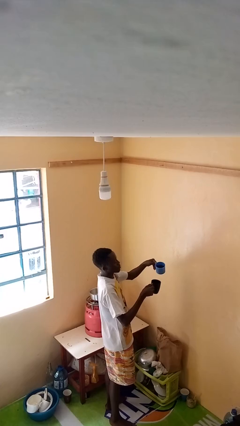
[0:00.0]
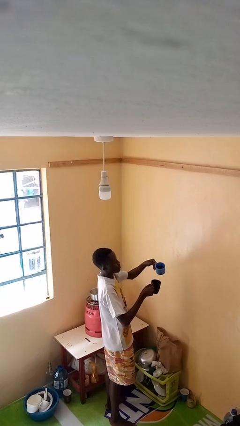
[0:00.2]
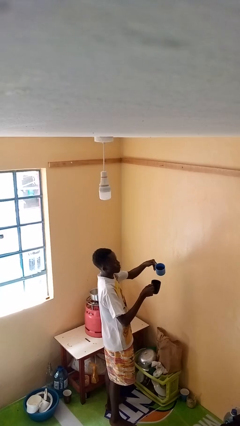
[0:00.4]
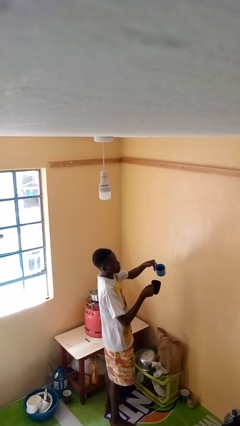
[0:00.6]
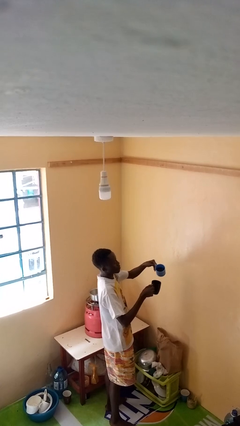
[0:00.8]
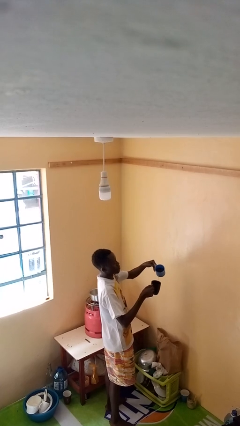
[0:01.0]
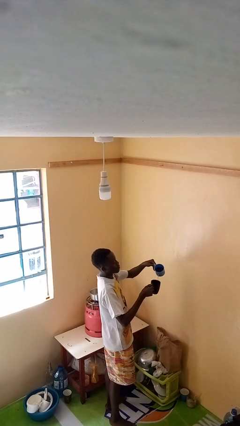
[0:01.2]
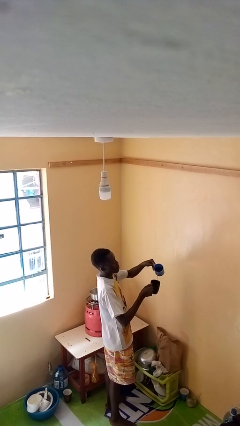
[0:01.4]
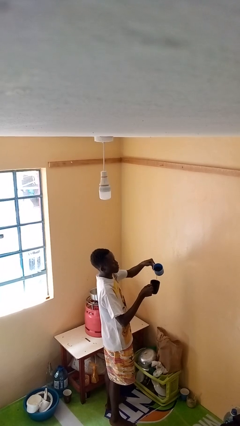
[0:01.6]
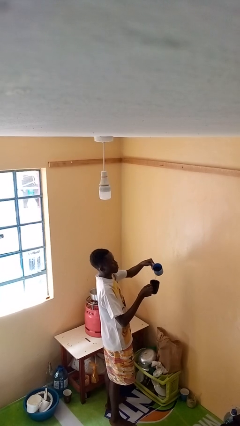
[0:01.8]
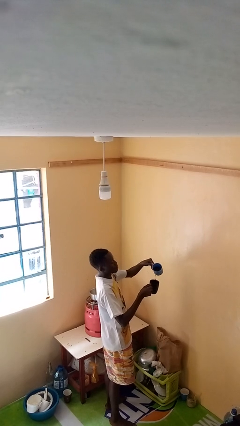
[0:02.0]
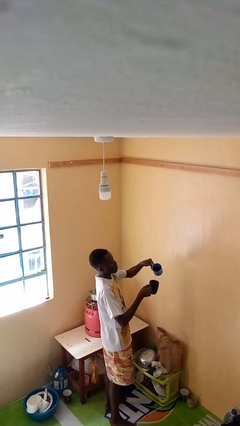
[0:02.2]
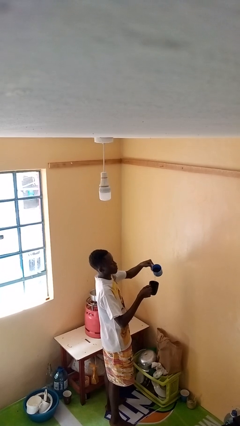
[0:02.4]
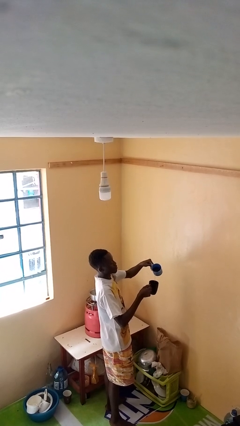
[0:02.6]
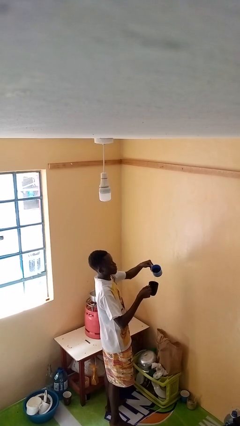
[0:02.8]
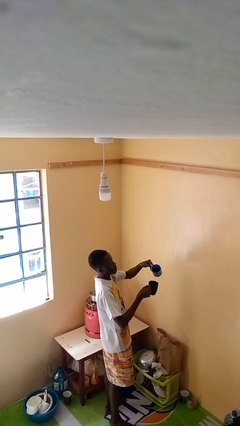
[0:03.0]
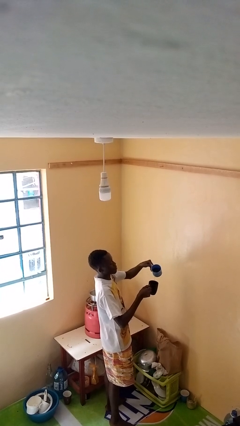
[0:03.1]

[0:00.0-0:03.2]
person pours coffee into mug

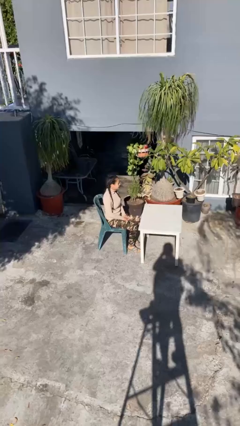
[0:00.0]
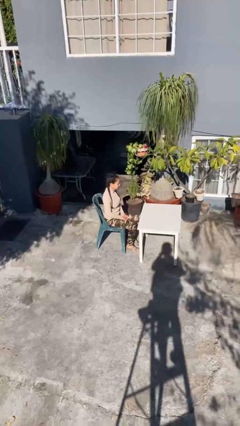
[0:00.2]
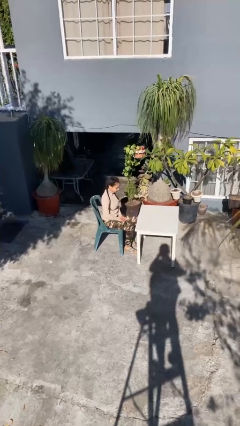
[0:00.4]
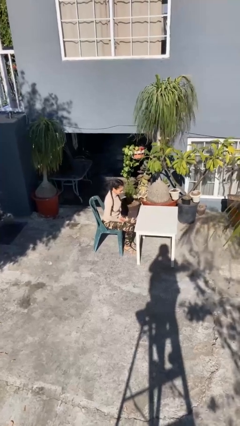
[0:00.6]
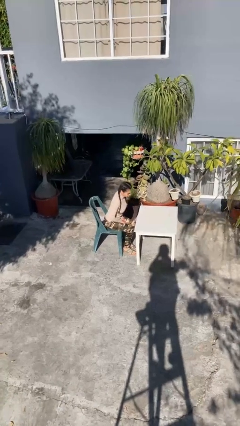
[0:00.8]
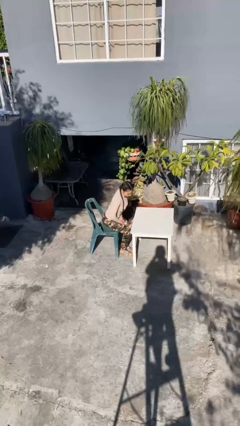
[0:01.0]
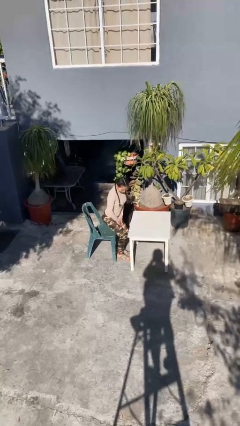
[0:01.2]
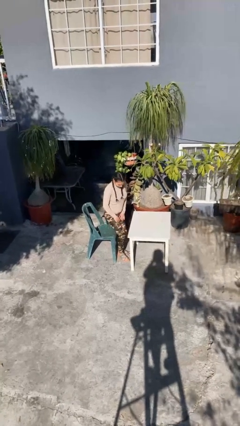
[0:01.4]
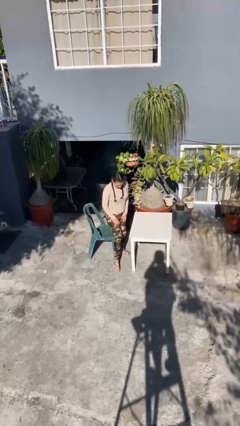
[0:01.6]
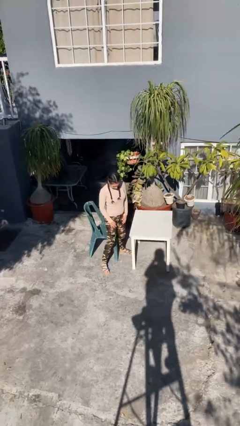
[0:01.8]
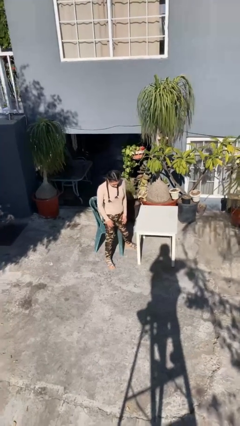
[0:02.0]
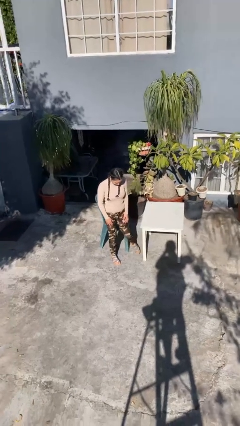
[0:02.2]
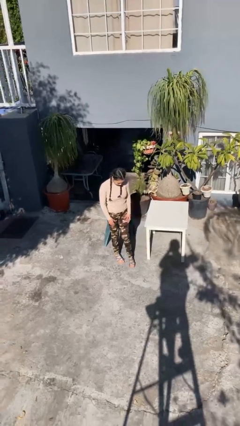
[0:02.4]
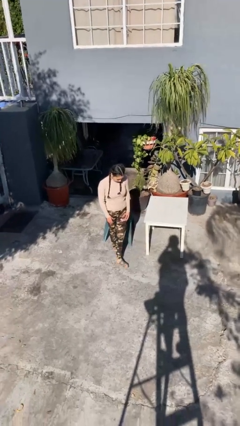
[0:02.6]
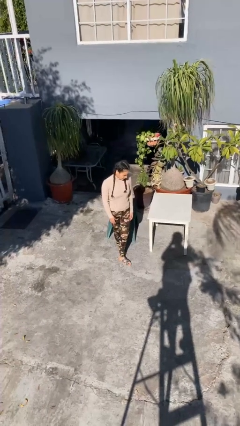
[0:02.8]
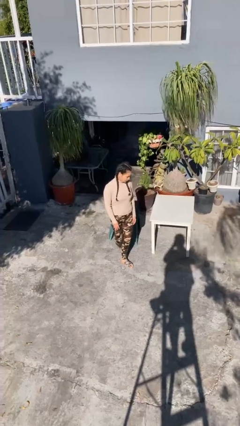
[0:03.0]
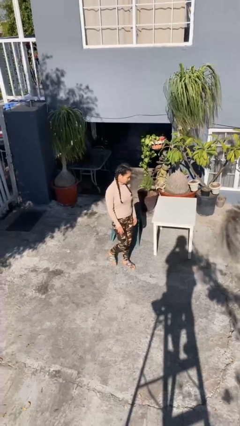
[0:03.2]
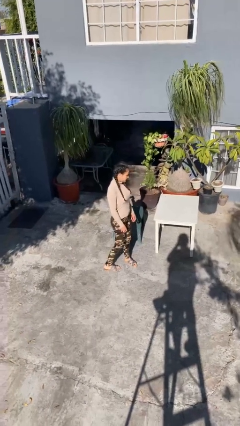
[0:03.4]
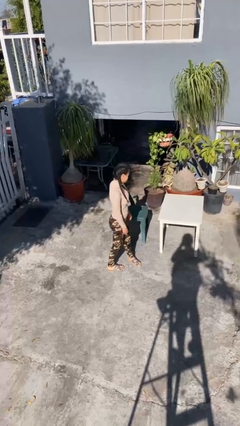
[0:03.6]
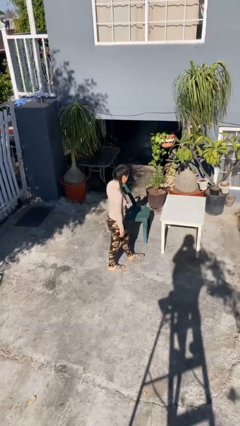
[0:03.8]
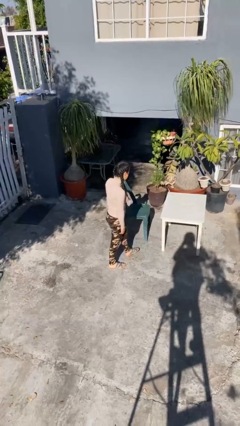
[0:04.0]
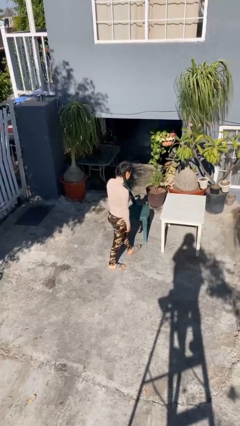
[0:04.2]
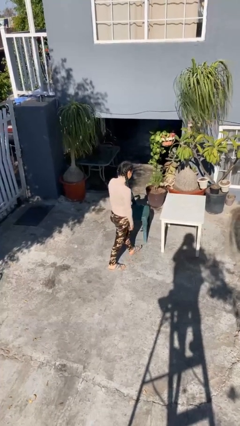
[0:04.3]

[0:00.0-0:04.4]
person stands up

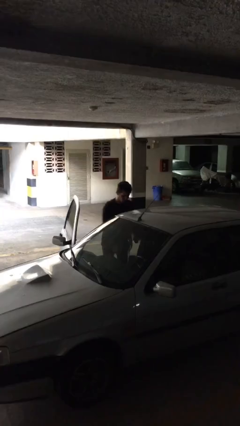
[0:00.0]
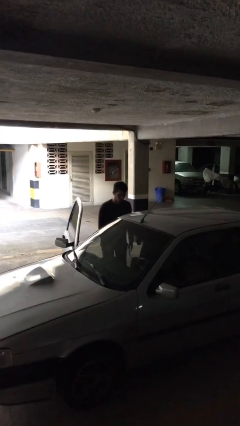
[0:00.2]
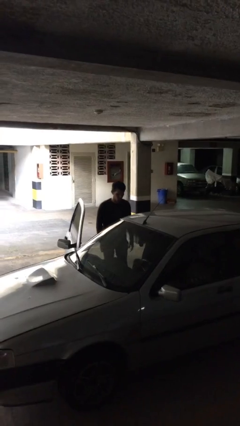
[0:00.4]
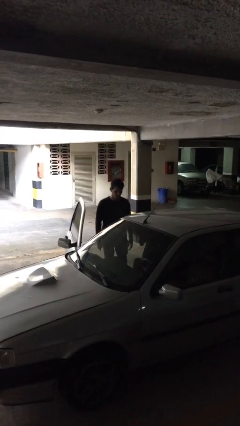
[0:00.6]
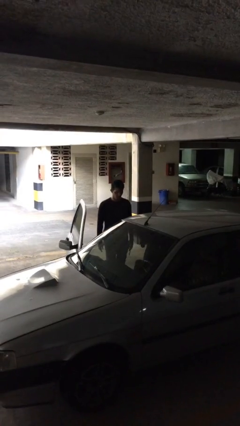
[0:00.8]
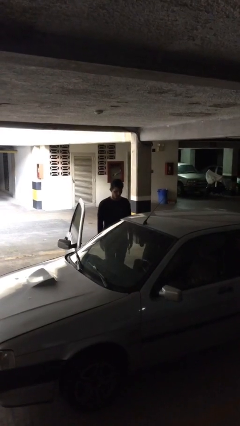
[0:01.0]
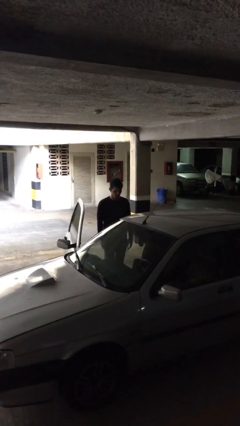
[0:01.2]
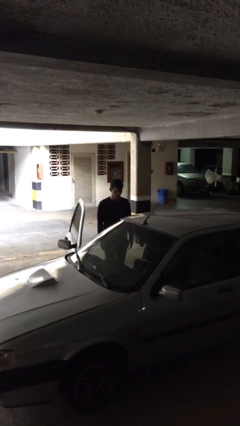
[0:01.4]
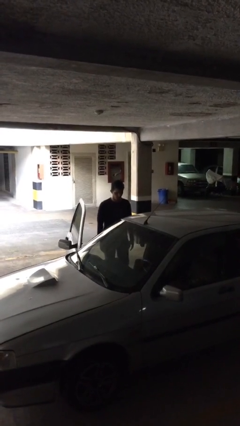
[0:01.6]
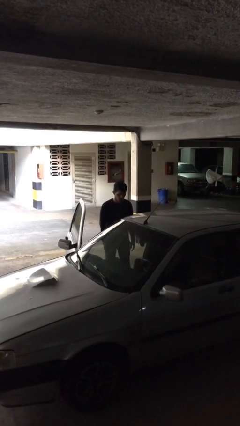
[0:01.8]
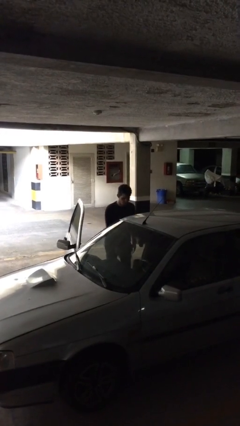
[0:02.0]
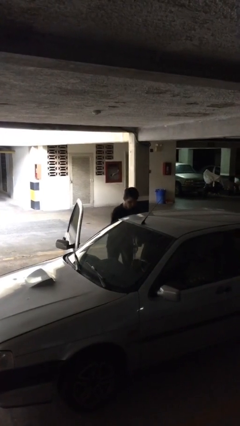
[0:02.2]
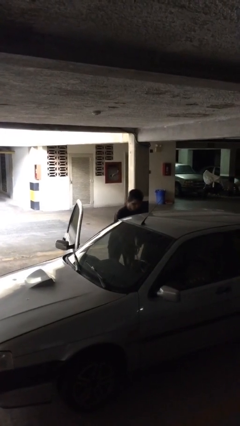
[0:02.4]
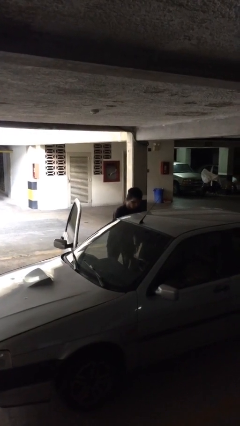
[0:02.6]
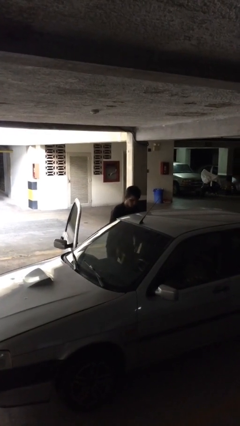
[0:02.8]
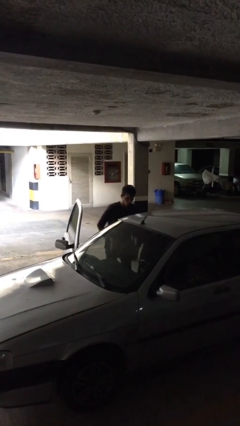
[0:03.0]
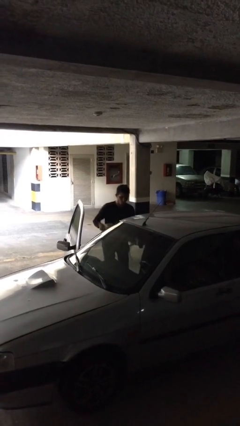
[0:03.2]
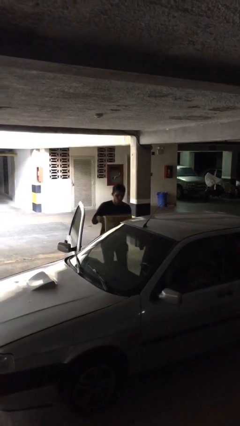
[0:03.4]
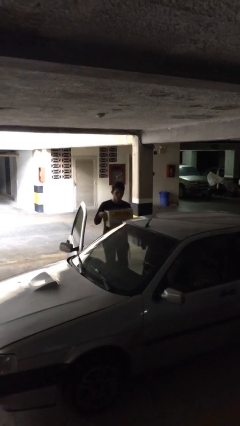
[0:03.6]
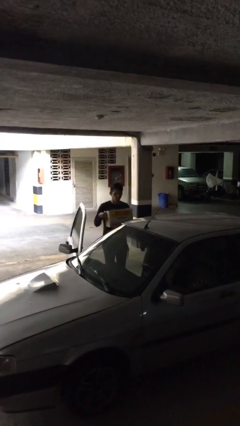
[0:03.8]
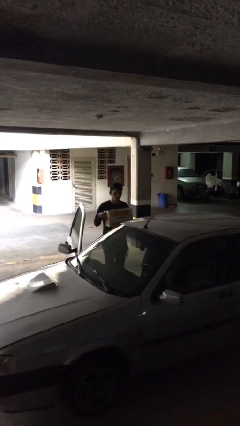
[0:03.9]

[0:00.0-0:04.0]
person unloads car

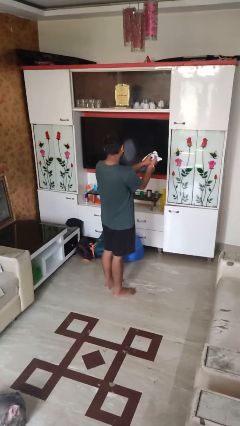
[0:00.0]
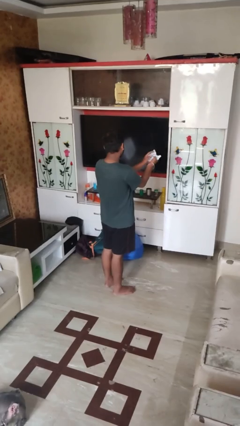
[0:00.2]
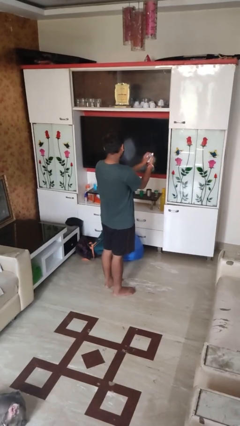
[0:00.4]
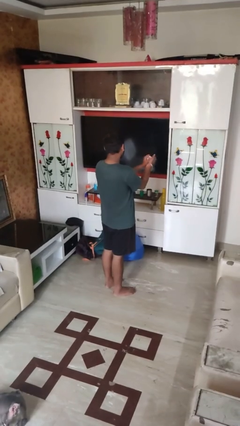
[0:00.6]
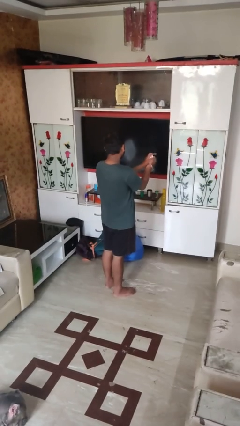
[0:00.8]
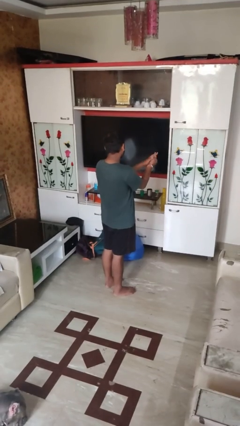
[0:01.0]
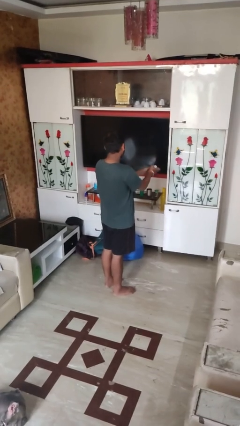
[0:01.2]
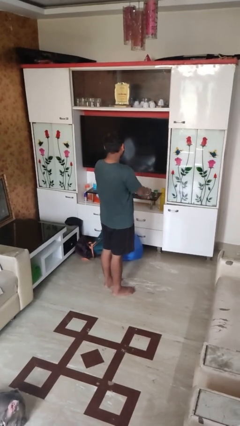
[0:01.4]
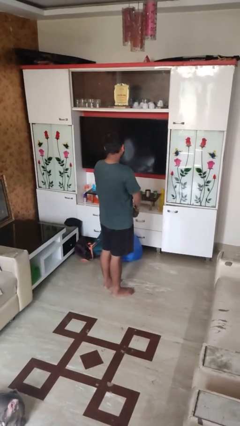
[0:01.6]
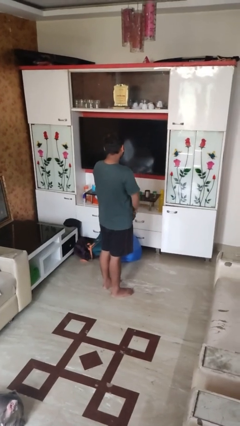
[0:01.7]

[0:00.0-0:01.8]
person crumples paper

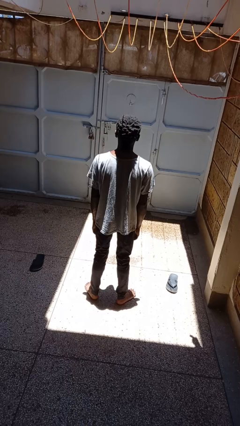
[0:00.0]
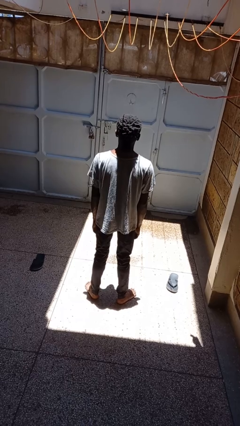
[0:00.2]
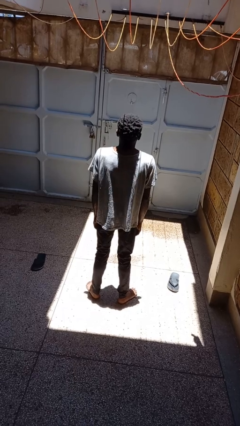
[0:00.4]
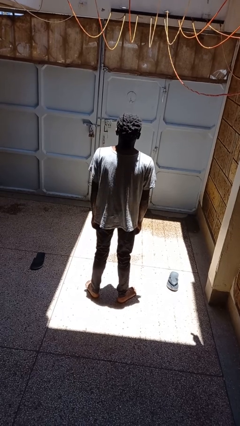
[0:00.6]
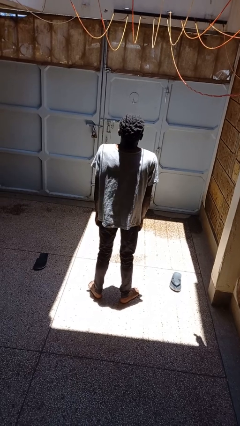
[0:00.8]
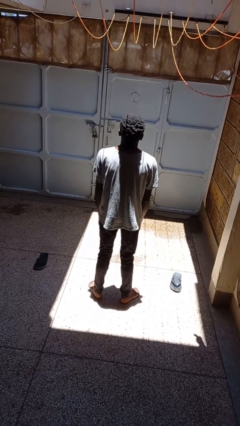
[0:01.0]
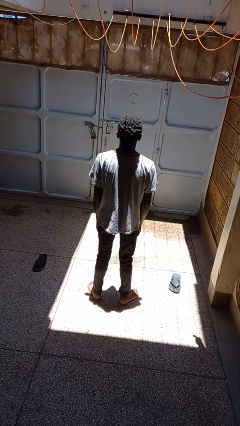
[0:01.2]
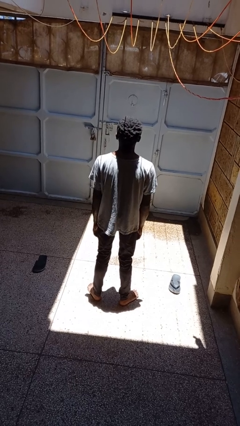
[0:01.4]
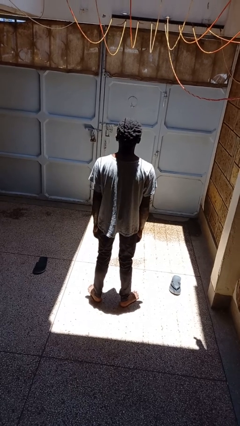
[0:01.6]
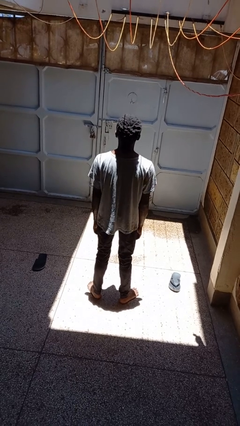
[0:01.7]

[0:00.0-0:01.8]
person shrugs

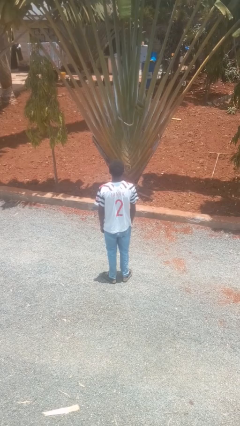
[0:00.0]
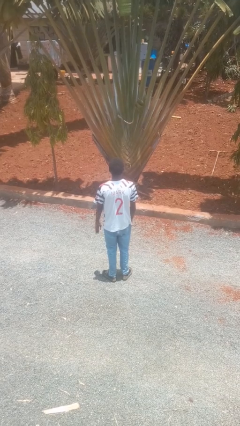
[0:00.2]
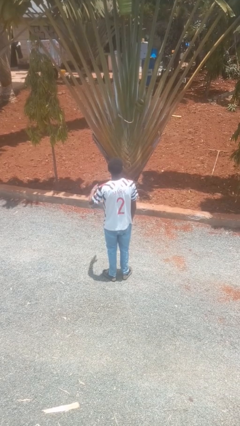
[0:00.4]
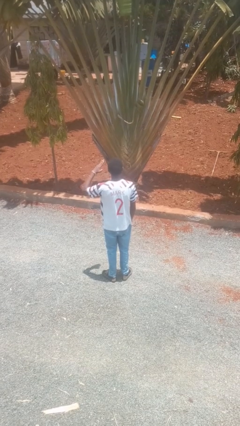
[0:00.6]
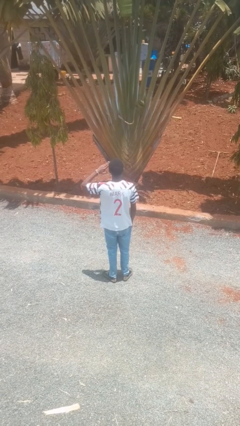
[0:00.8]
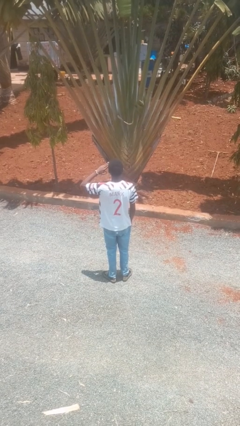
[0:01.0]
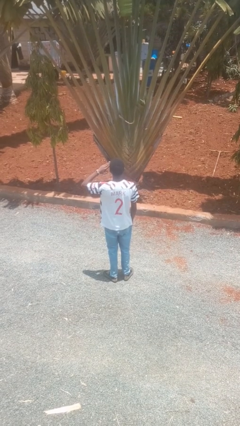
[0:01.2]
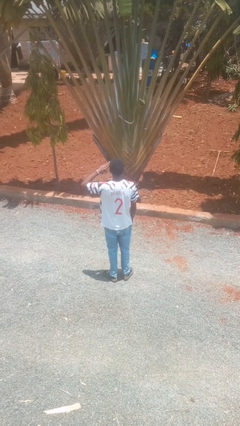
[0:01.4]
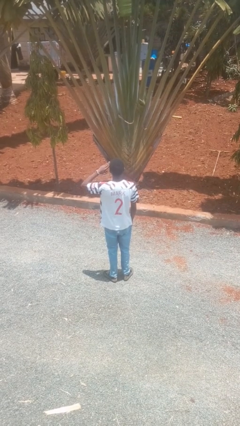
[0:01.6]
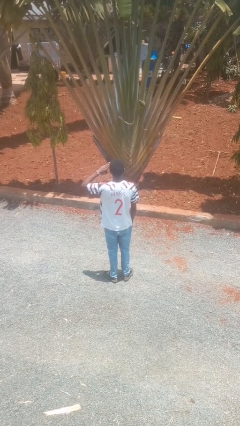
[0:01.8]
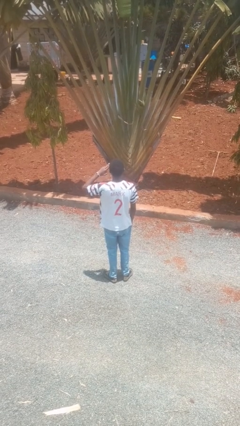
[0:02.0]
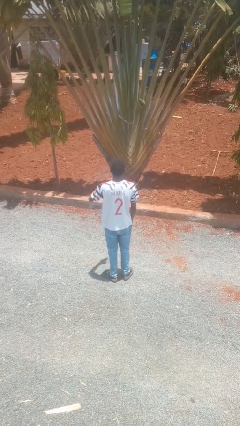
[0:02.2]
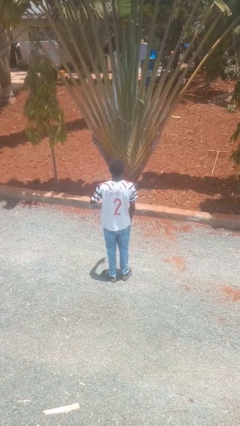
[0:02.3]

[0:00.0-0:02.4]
person salutes
